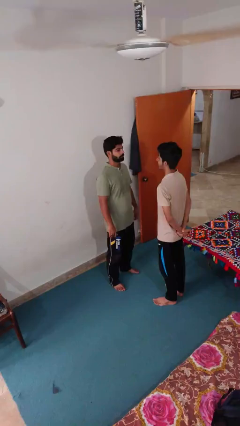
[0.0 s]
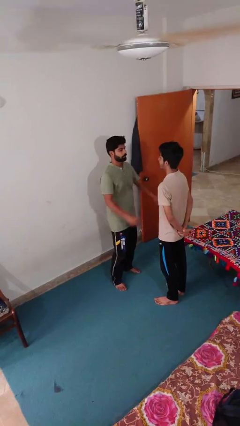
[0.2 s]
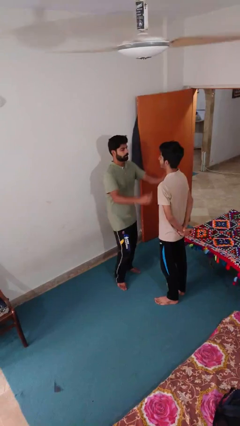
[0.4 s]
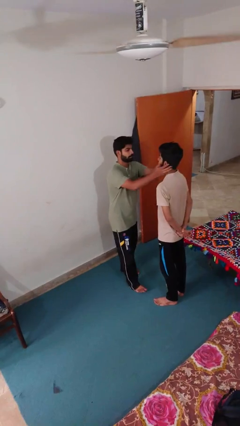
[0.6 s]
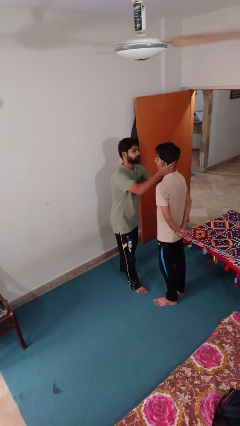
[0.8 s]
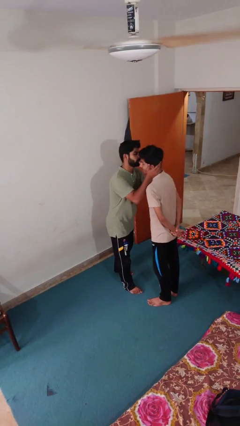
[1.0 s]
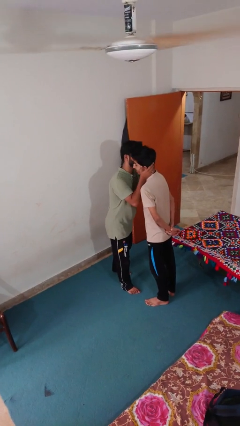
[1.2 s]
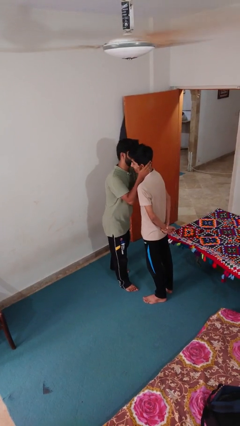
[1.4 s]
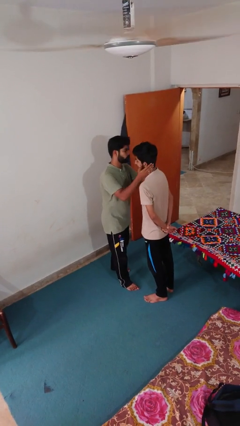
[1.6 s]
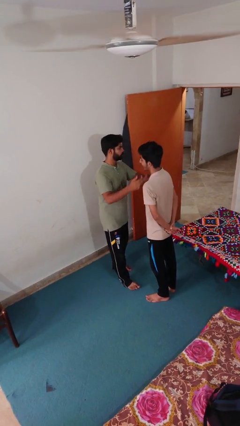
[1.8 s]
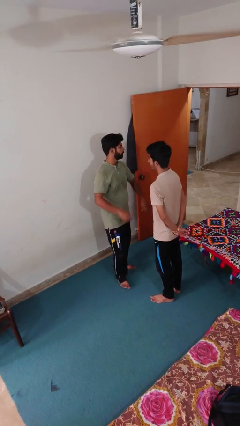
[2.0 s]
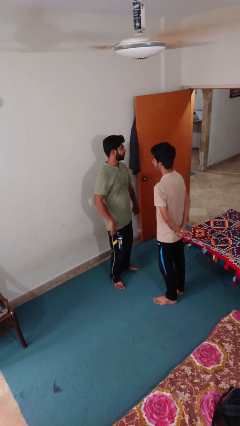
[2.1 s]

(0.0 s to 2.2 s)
person kisses cheek of person

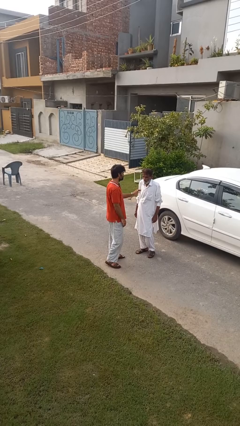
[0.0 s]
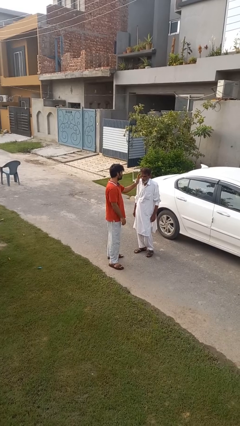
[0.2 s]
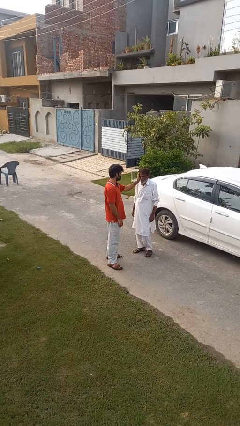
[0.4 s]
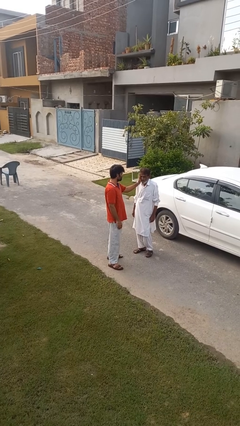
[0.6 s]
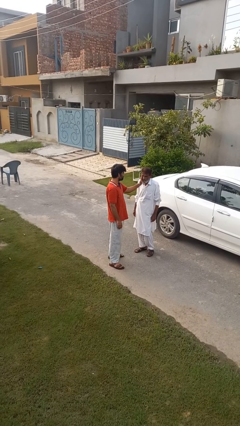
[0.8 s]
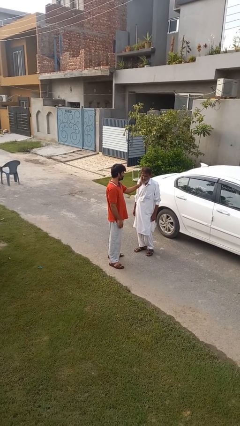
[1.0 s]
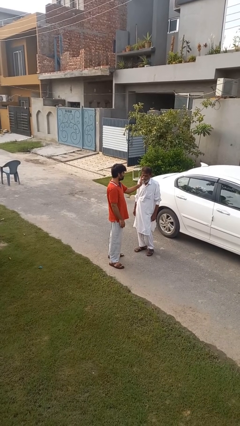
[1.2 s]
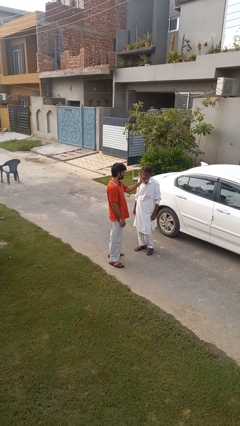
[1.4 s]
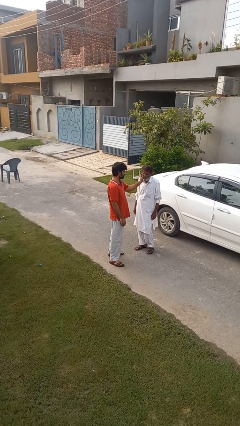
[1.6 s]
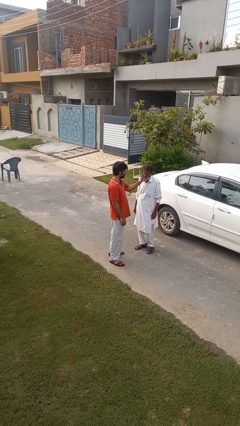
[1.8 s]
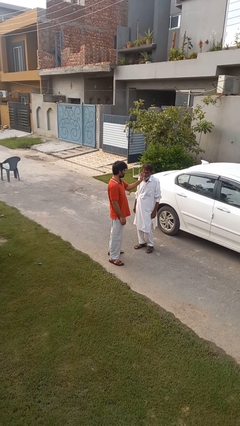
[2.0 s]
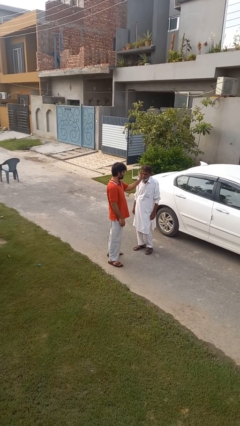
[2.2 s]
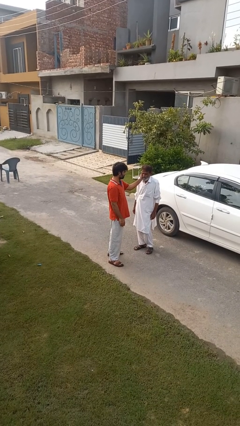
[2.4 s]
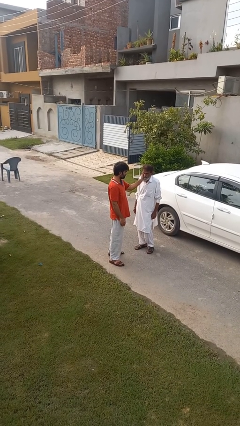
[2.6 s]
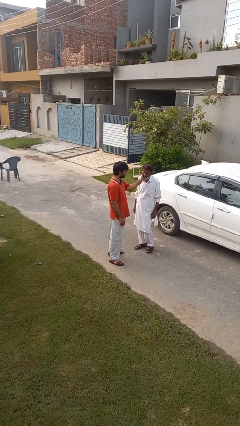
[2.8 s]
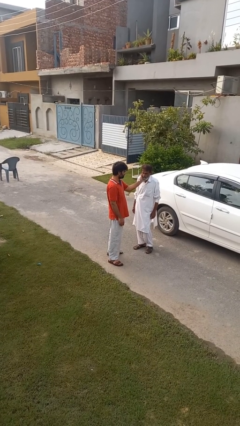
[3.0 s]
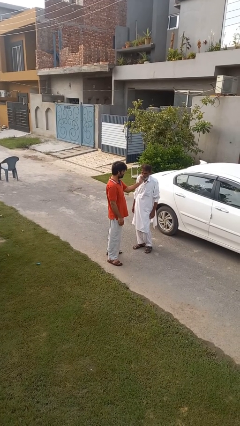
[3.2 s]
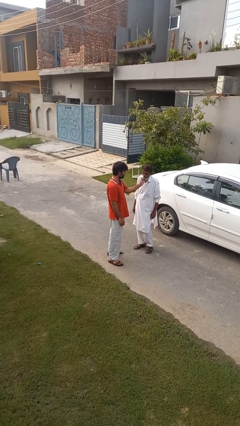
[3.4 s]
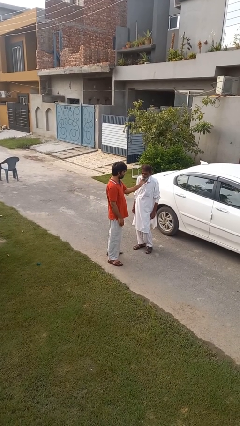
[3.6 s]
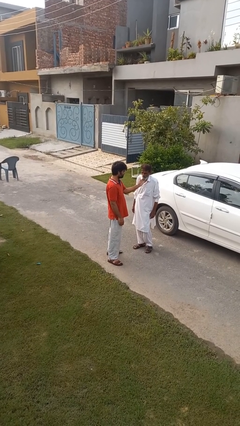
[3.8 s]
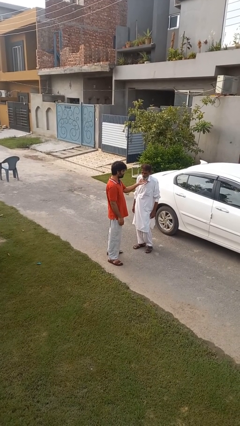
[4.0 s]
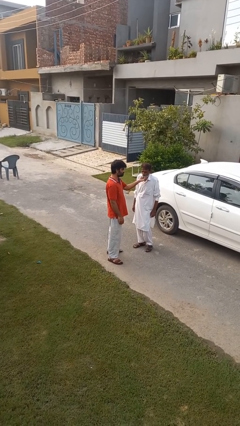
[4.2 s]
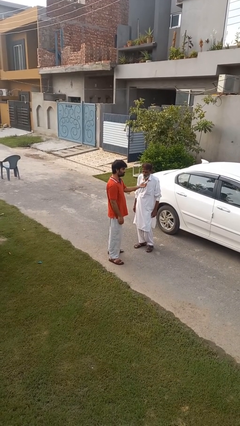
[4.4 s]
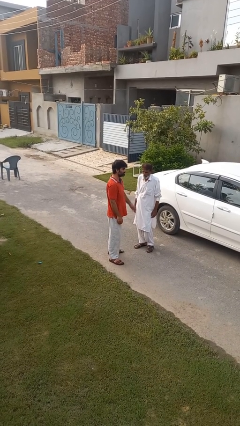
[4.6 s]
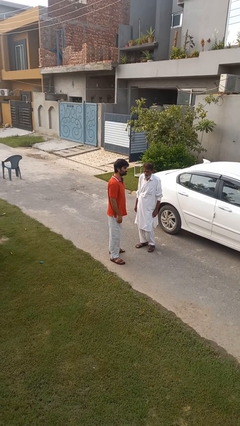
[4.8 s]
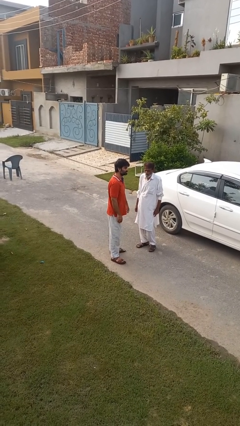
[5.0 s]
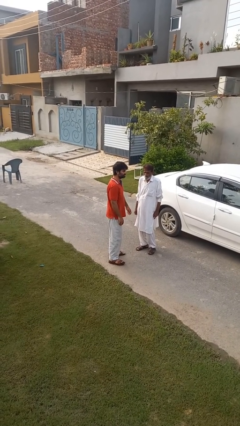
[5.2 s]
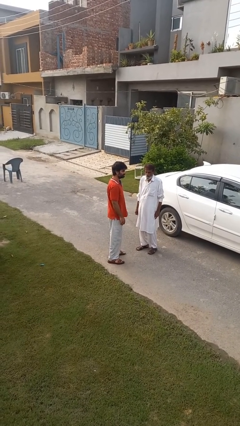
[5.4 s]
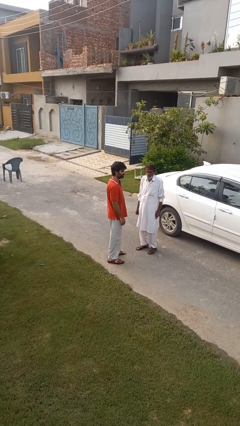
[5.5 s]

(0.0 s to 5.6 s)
person touches face of person

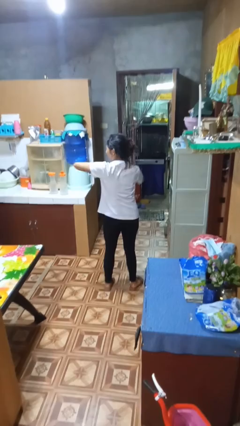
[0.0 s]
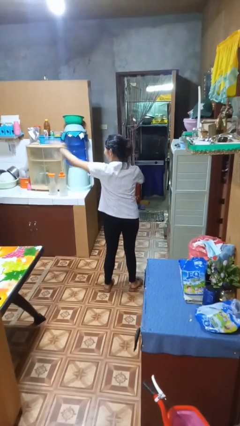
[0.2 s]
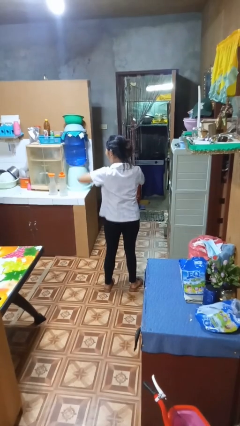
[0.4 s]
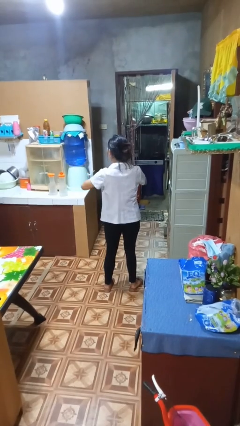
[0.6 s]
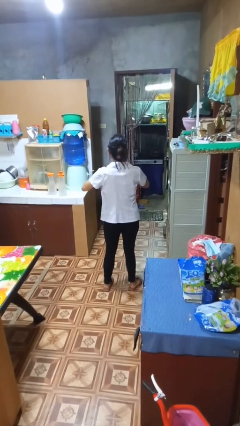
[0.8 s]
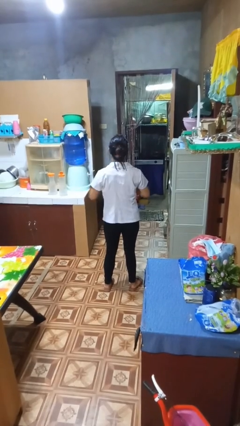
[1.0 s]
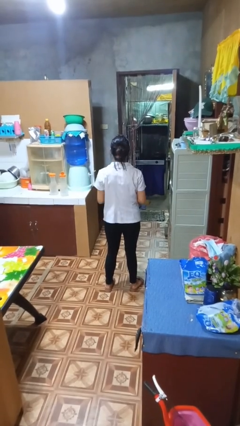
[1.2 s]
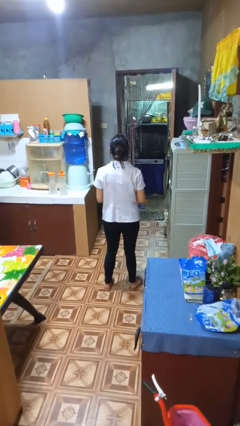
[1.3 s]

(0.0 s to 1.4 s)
person karate chop

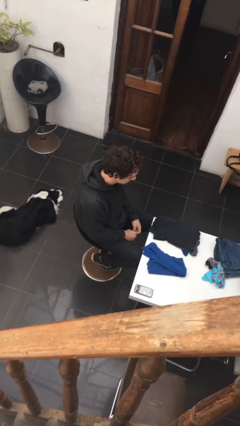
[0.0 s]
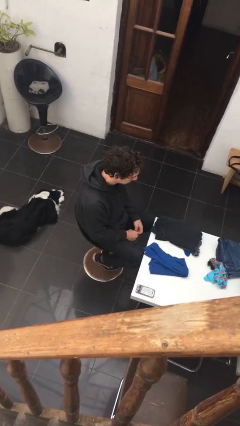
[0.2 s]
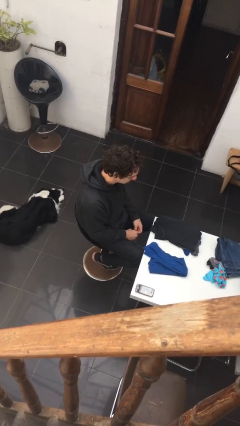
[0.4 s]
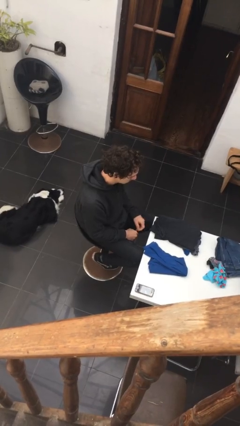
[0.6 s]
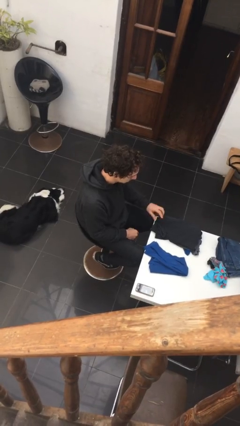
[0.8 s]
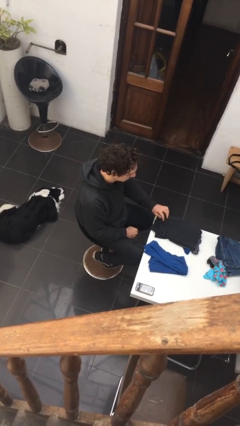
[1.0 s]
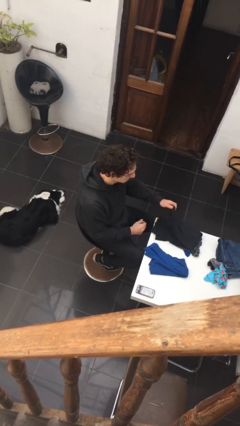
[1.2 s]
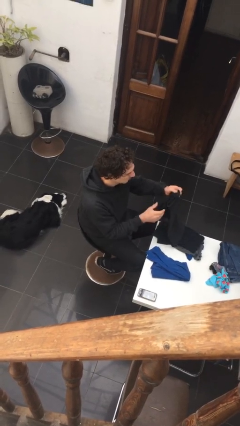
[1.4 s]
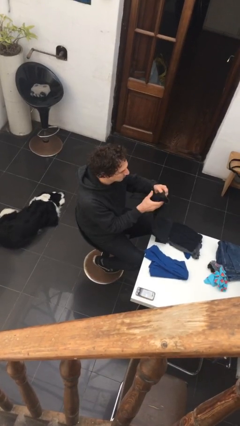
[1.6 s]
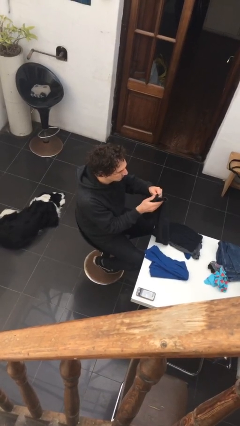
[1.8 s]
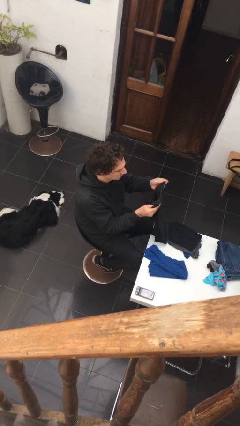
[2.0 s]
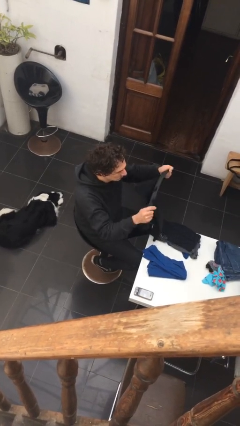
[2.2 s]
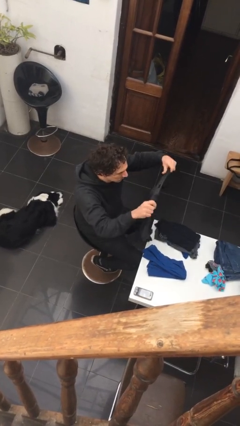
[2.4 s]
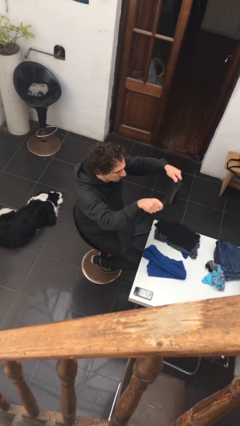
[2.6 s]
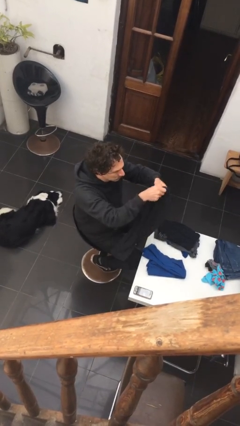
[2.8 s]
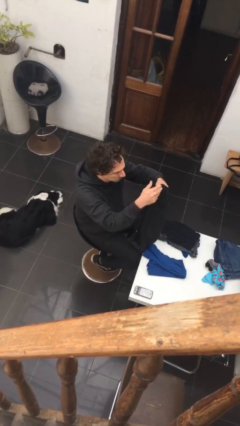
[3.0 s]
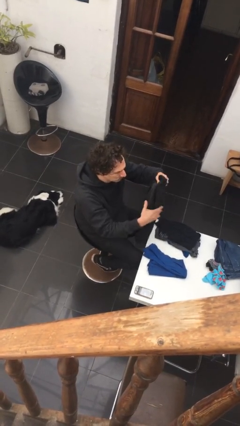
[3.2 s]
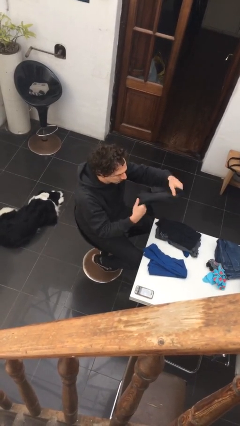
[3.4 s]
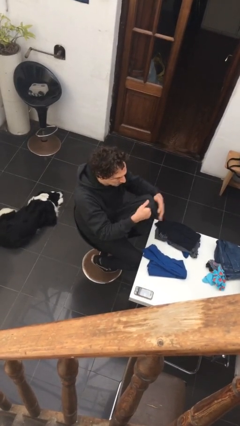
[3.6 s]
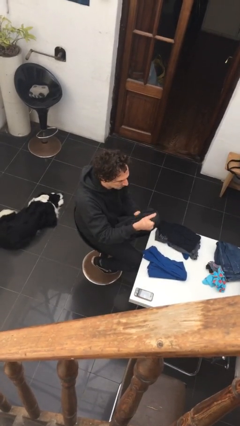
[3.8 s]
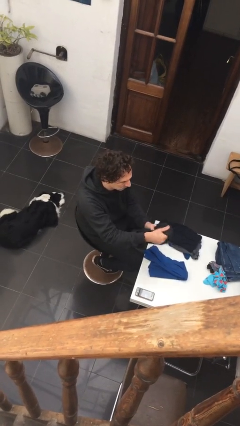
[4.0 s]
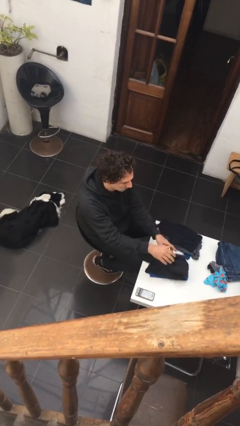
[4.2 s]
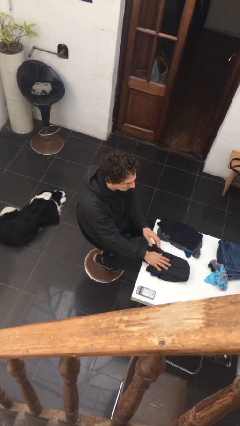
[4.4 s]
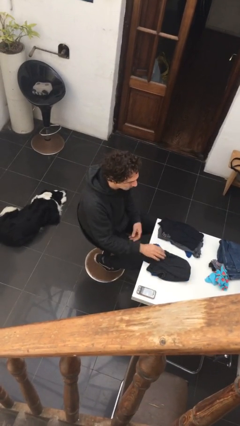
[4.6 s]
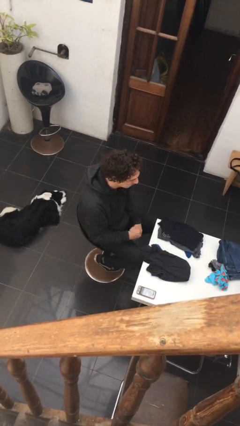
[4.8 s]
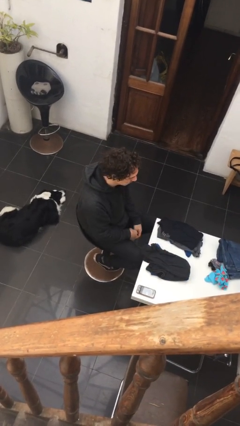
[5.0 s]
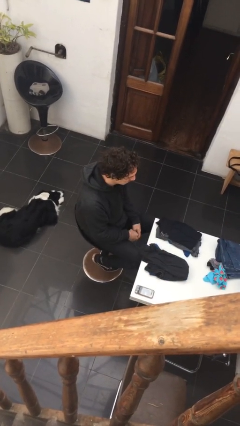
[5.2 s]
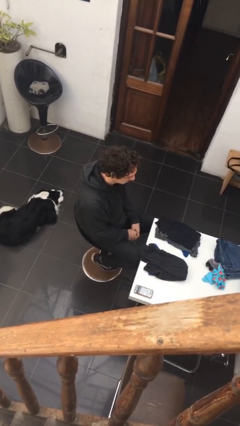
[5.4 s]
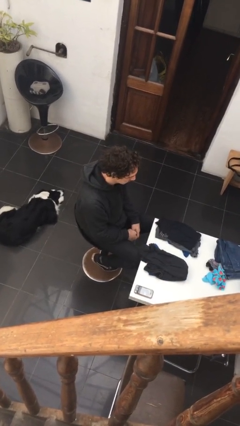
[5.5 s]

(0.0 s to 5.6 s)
person folds shirt

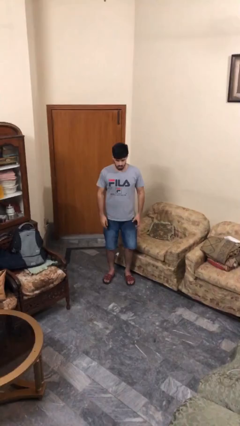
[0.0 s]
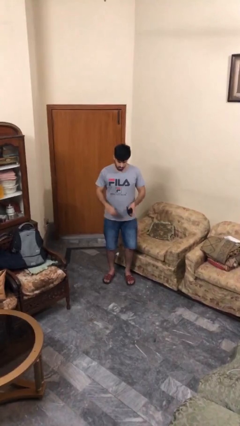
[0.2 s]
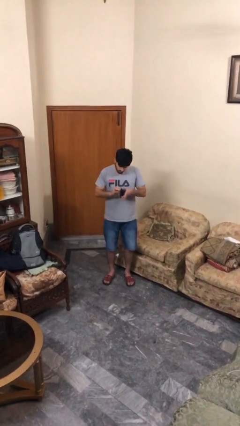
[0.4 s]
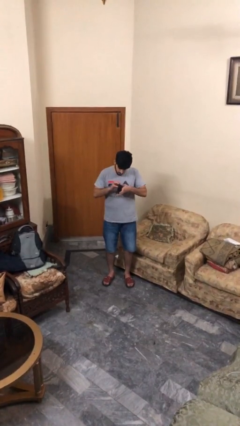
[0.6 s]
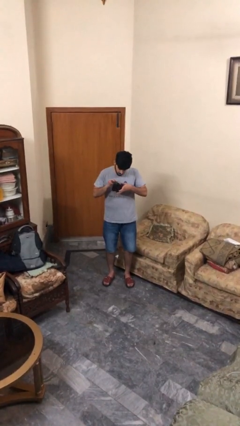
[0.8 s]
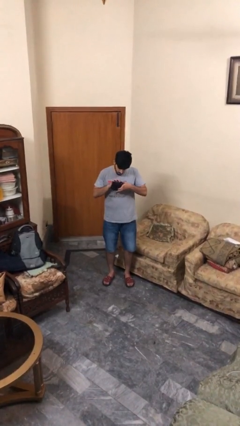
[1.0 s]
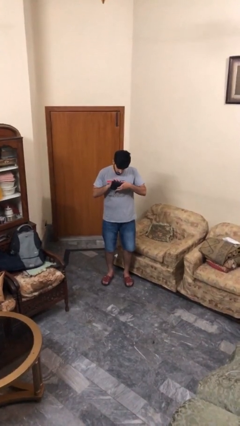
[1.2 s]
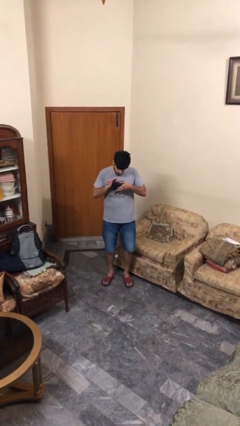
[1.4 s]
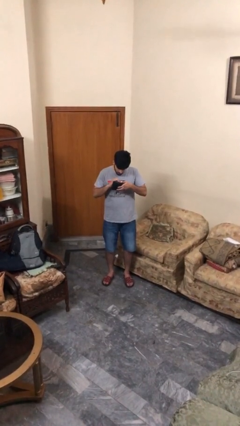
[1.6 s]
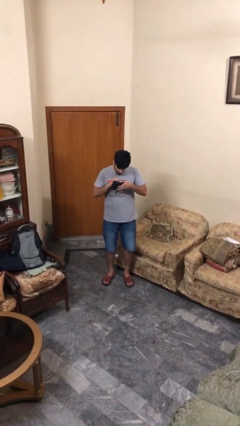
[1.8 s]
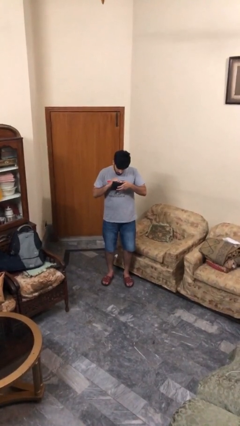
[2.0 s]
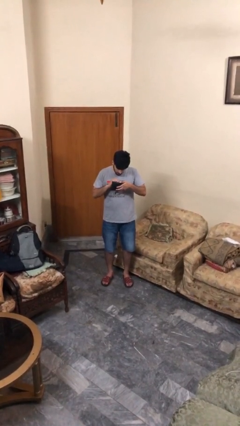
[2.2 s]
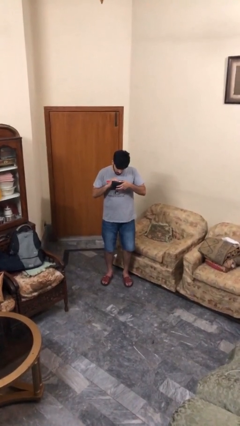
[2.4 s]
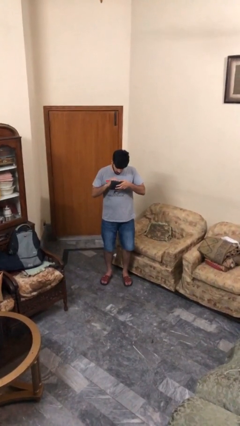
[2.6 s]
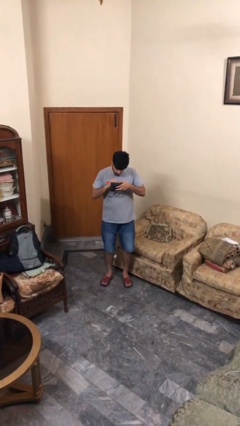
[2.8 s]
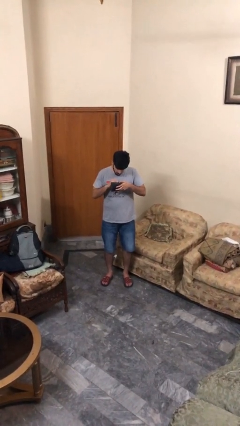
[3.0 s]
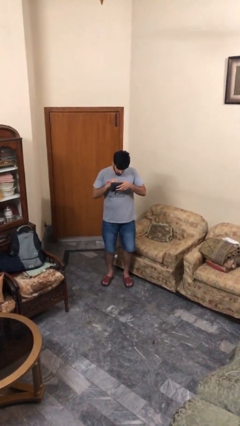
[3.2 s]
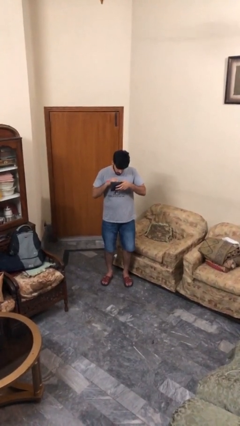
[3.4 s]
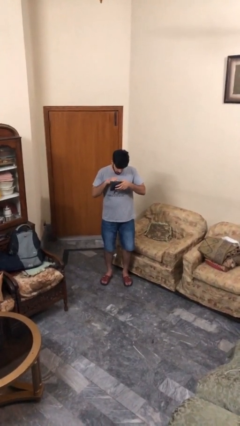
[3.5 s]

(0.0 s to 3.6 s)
person searches in purse
